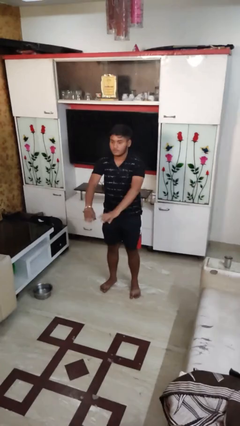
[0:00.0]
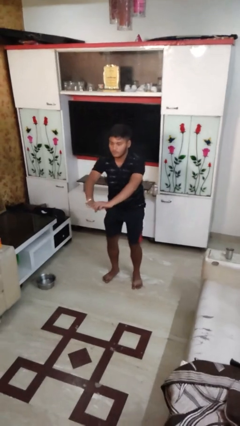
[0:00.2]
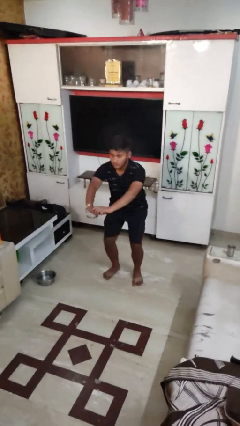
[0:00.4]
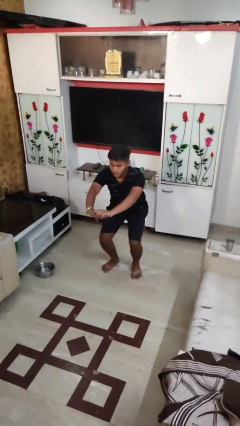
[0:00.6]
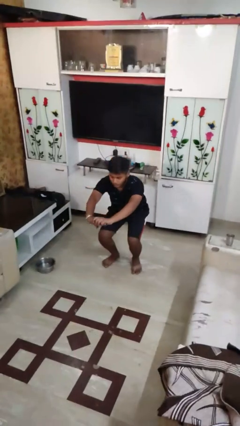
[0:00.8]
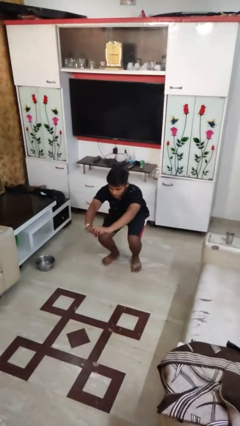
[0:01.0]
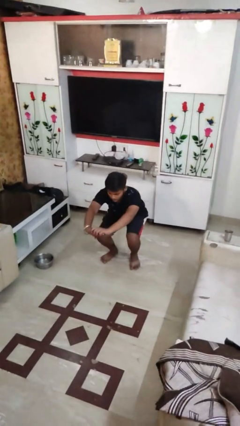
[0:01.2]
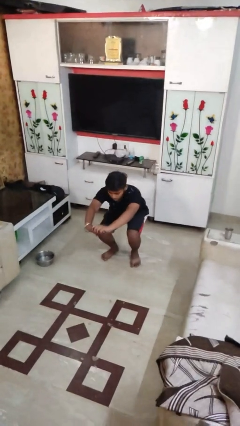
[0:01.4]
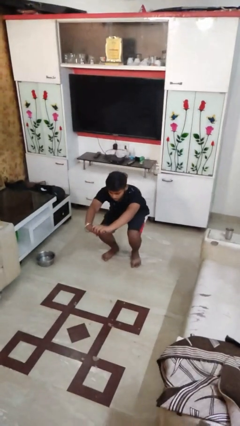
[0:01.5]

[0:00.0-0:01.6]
person squats

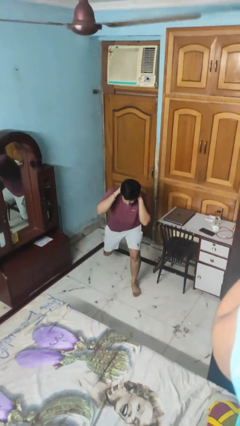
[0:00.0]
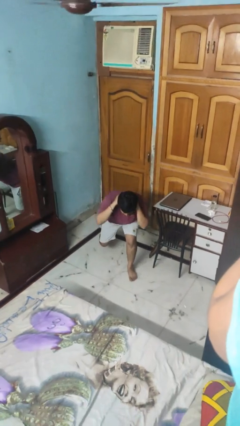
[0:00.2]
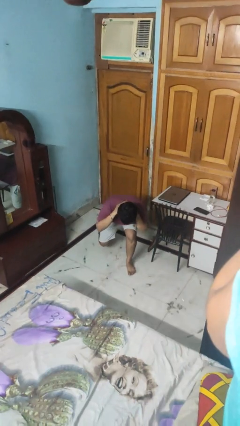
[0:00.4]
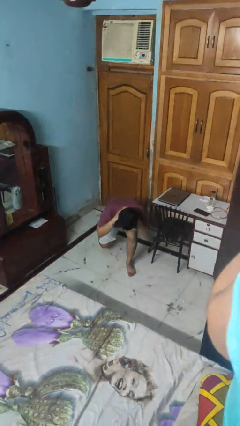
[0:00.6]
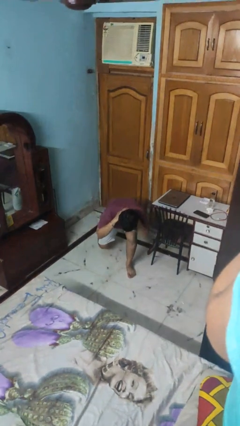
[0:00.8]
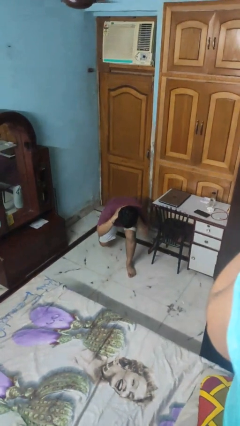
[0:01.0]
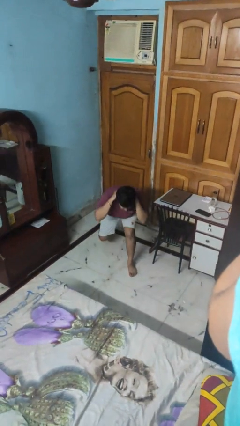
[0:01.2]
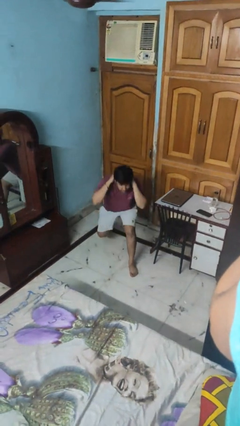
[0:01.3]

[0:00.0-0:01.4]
person exercises with lunges

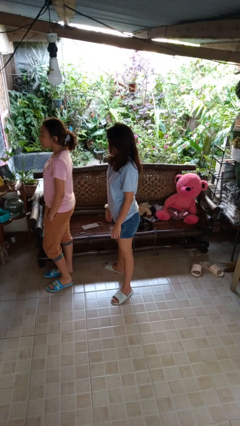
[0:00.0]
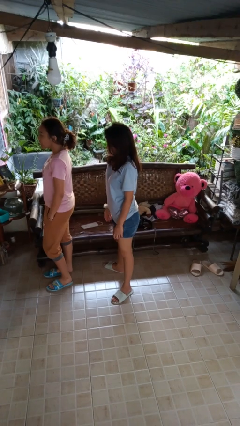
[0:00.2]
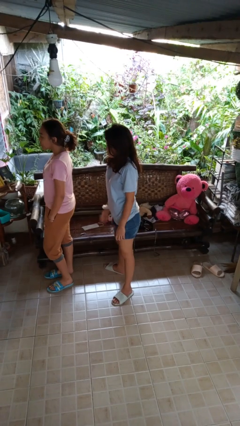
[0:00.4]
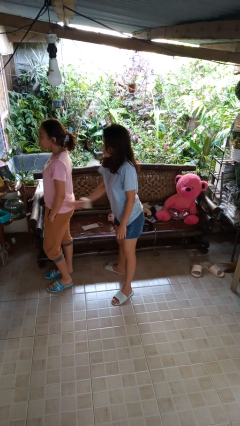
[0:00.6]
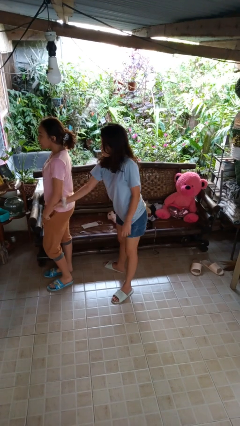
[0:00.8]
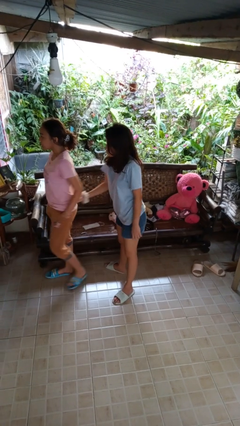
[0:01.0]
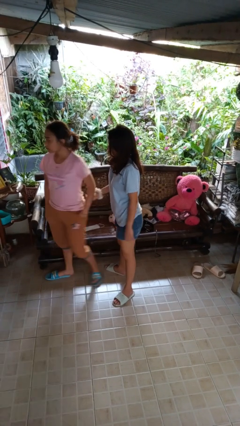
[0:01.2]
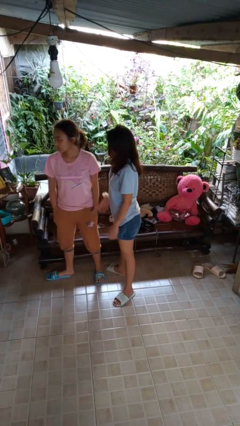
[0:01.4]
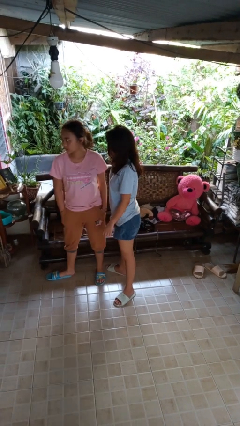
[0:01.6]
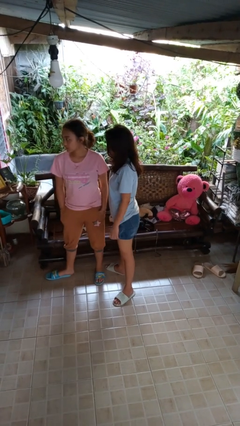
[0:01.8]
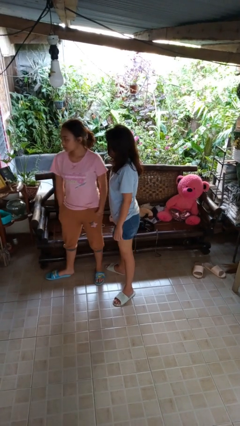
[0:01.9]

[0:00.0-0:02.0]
person grabs person by forearm

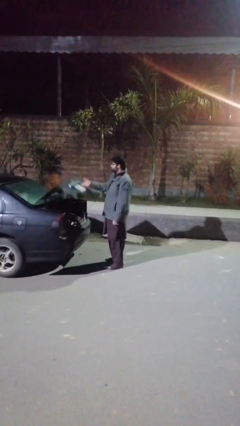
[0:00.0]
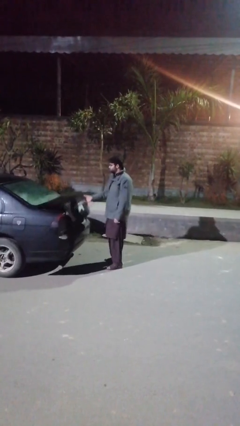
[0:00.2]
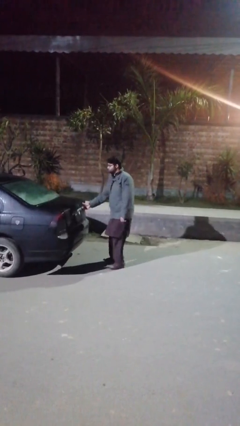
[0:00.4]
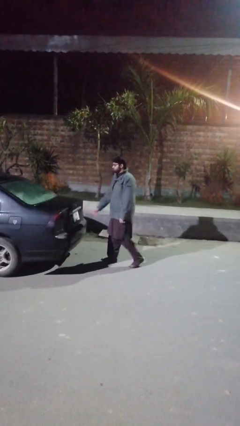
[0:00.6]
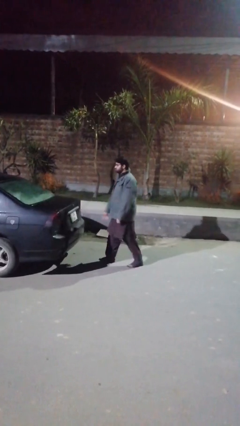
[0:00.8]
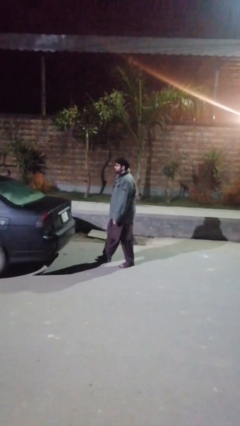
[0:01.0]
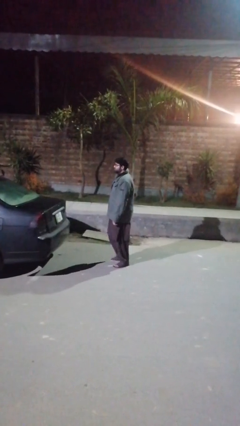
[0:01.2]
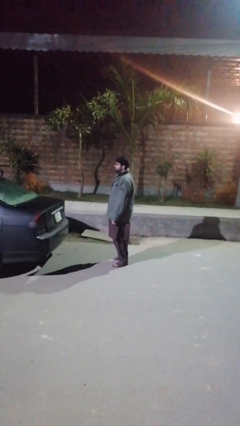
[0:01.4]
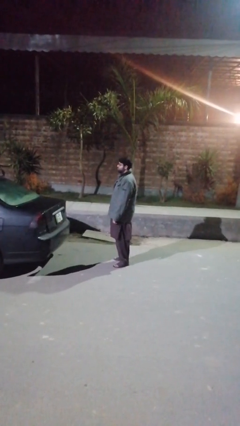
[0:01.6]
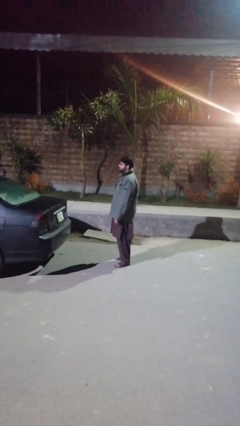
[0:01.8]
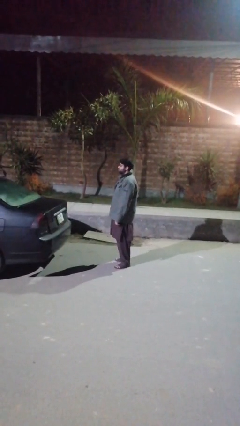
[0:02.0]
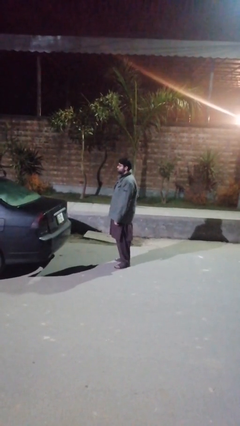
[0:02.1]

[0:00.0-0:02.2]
person opens car trunk

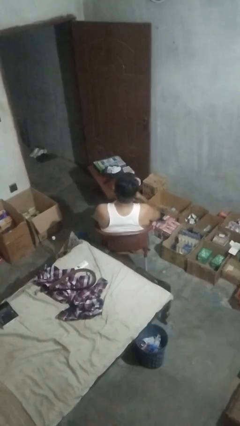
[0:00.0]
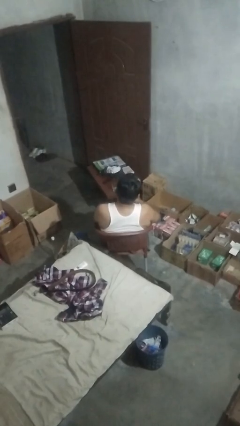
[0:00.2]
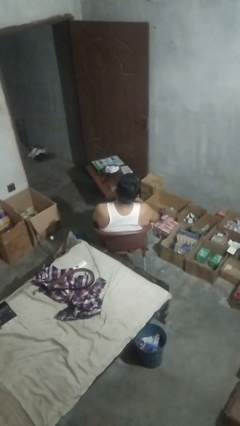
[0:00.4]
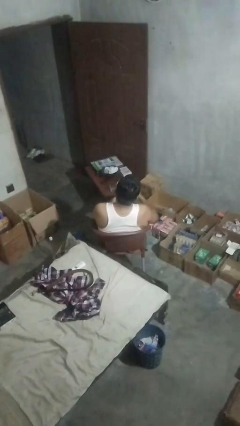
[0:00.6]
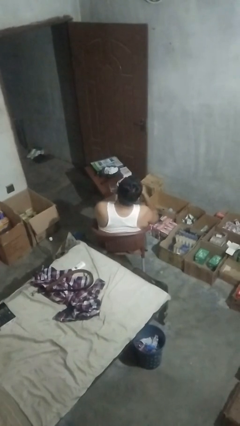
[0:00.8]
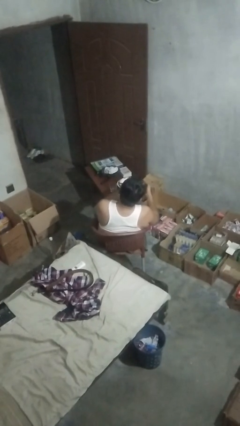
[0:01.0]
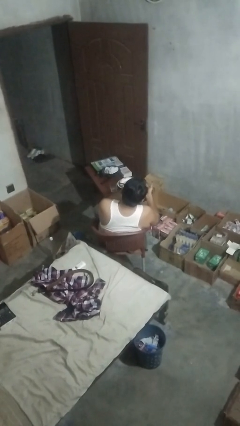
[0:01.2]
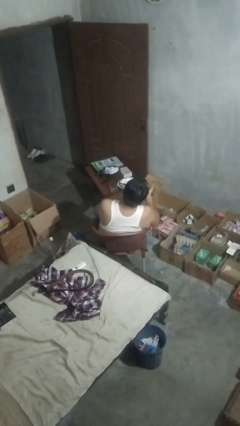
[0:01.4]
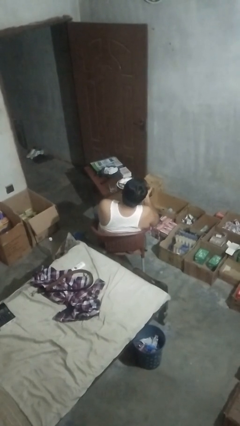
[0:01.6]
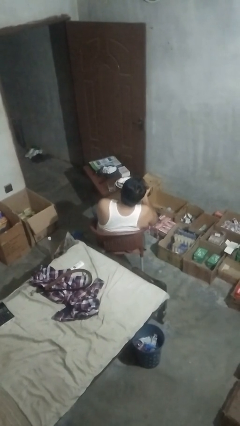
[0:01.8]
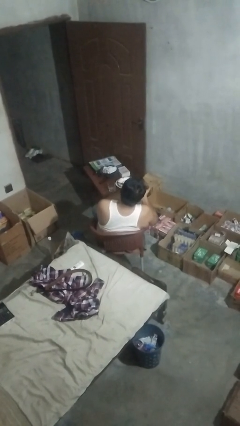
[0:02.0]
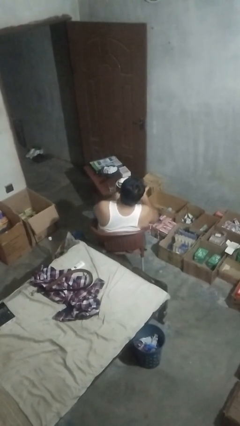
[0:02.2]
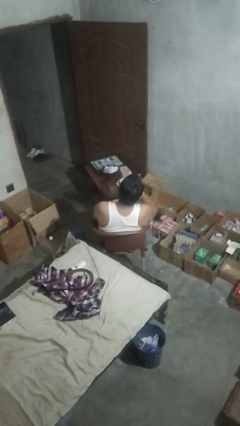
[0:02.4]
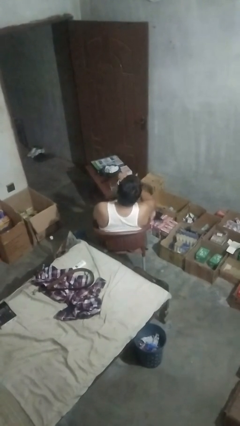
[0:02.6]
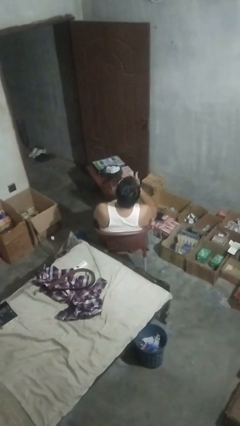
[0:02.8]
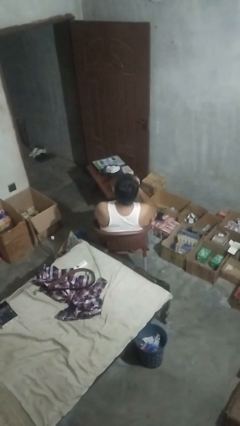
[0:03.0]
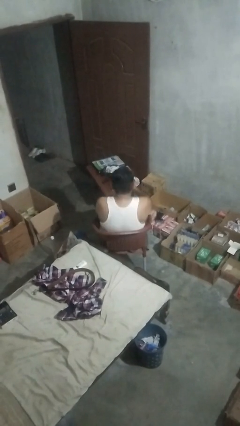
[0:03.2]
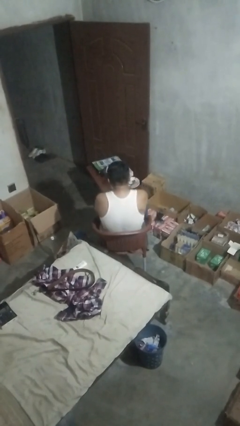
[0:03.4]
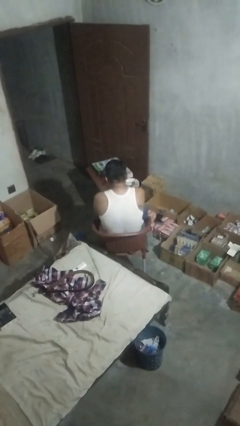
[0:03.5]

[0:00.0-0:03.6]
person takes medicine pills

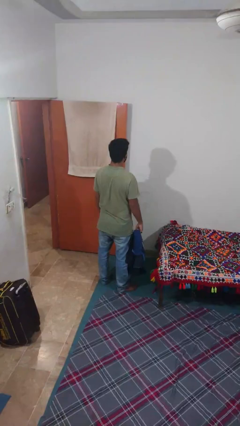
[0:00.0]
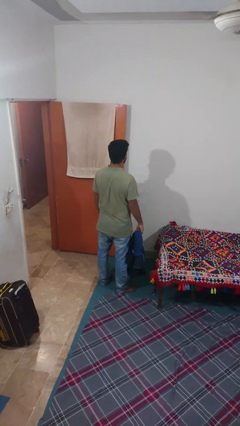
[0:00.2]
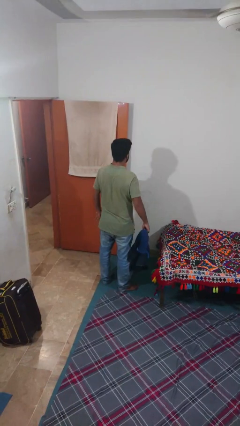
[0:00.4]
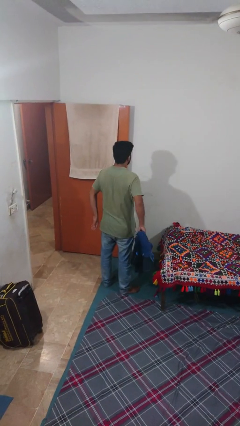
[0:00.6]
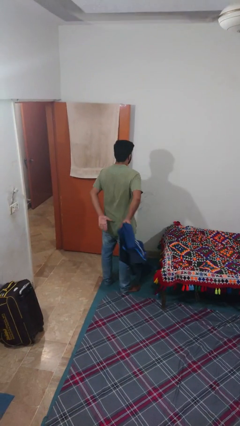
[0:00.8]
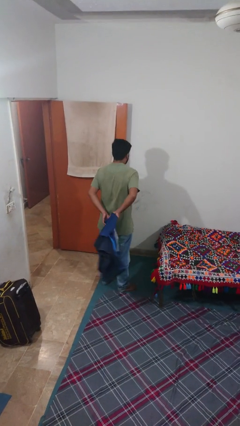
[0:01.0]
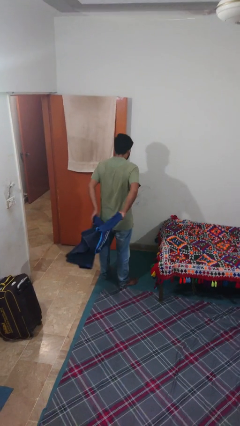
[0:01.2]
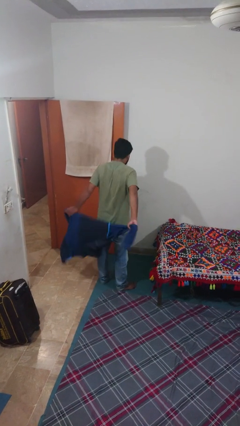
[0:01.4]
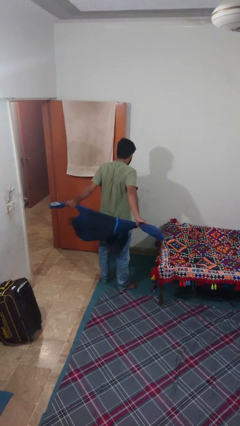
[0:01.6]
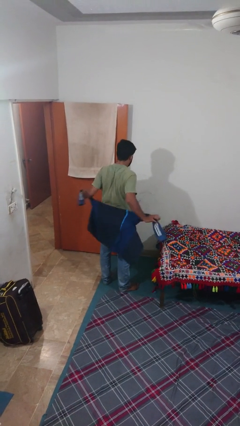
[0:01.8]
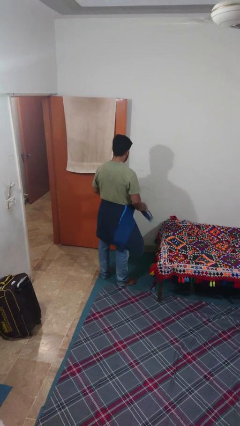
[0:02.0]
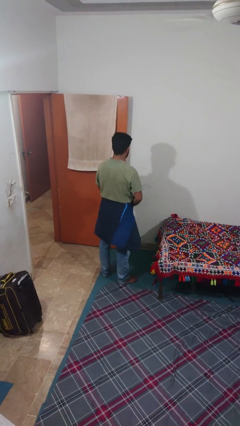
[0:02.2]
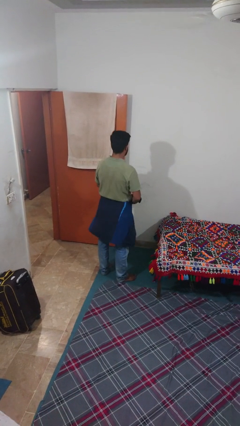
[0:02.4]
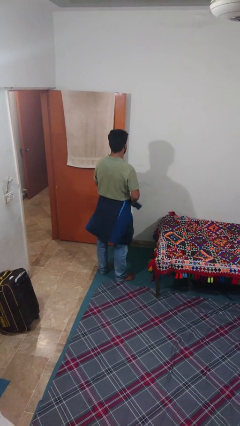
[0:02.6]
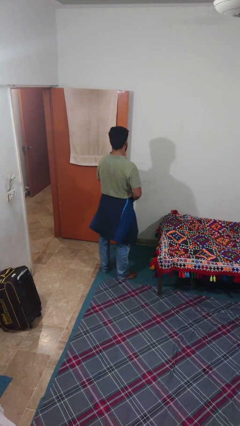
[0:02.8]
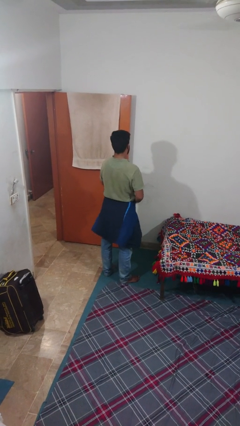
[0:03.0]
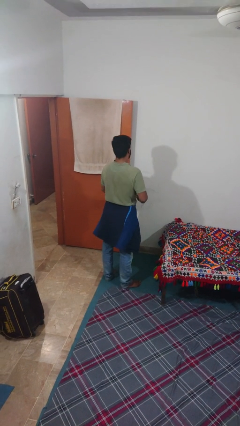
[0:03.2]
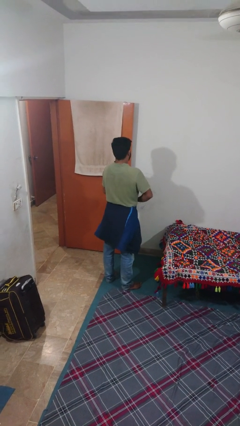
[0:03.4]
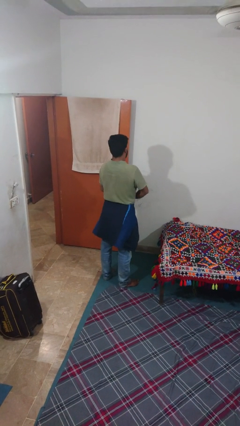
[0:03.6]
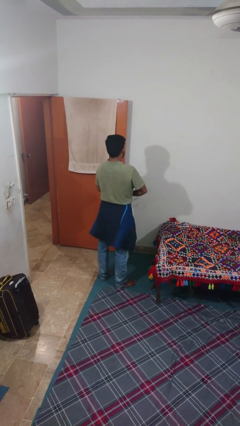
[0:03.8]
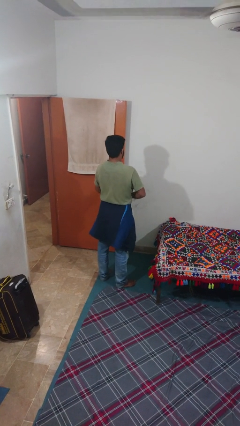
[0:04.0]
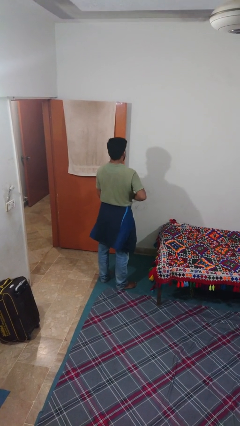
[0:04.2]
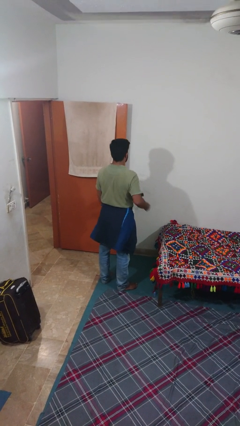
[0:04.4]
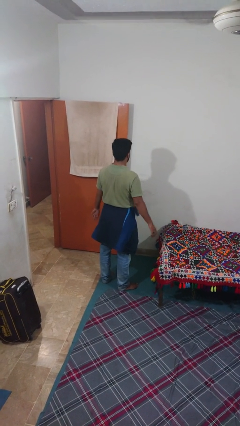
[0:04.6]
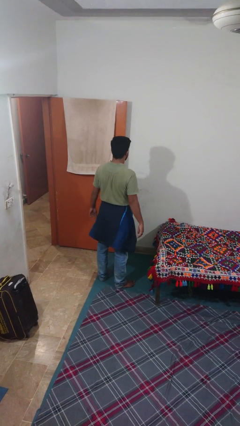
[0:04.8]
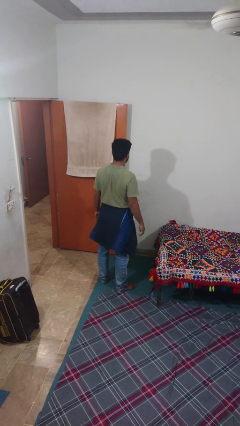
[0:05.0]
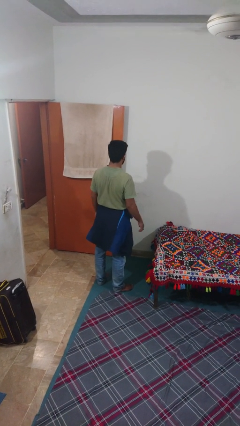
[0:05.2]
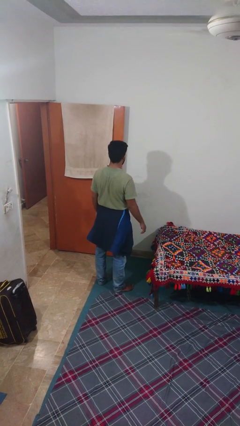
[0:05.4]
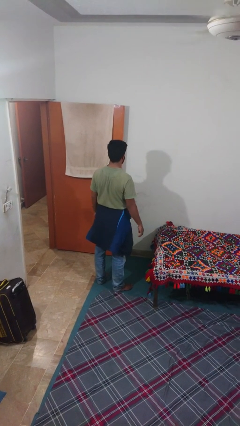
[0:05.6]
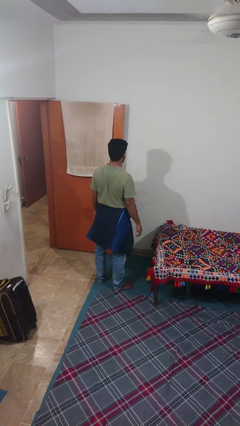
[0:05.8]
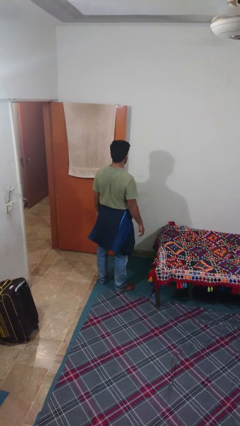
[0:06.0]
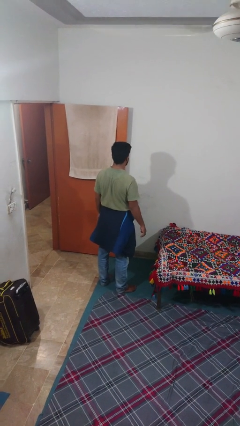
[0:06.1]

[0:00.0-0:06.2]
person ties jacket around waist

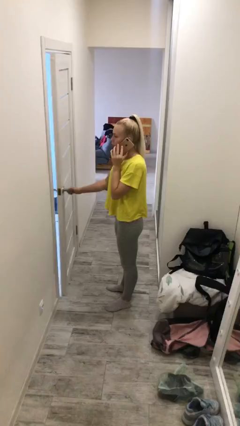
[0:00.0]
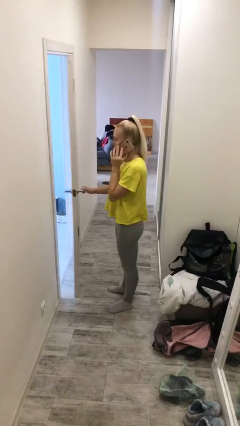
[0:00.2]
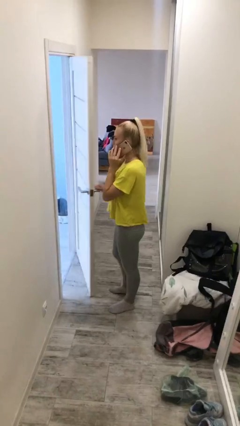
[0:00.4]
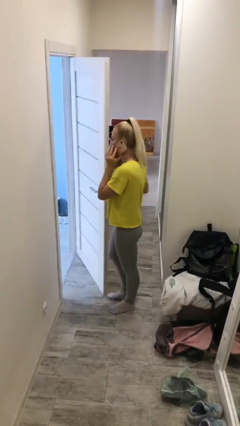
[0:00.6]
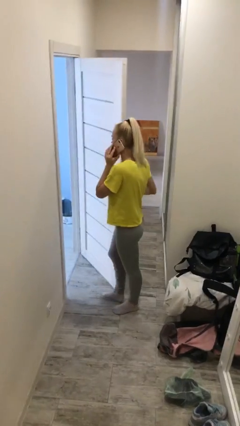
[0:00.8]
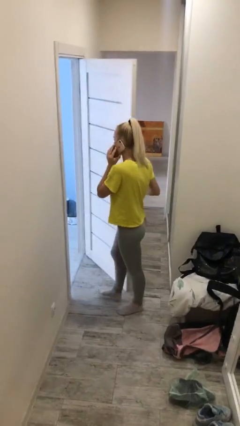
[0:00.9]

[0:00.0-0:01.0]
person opens facility door
